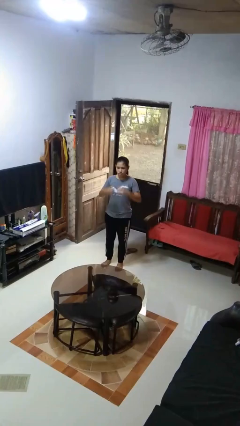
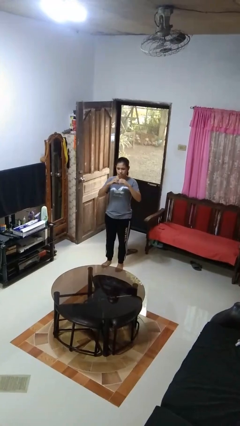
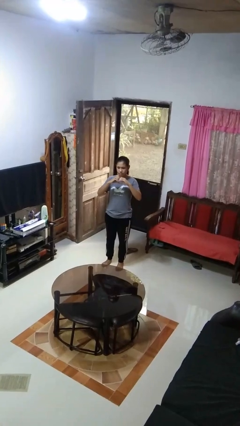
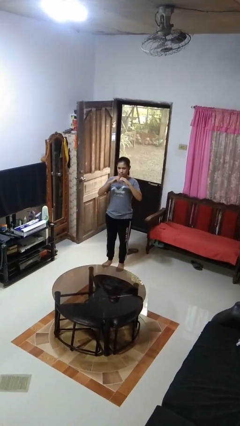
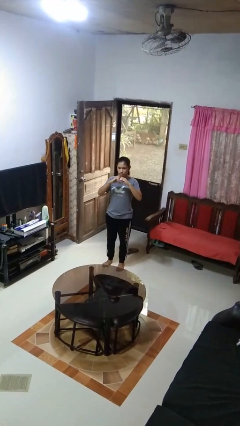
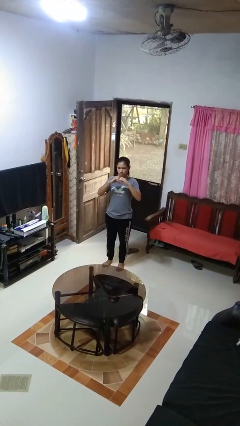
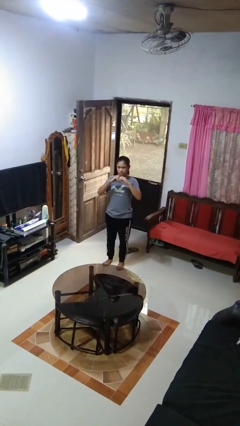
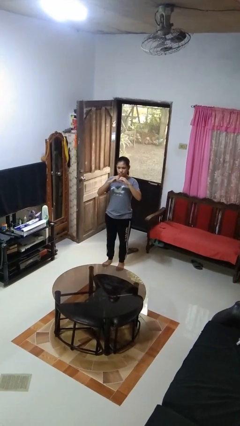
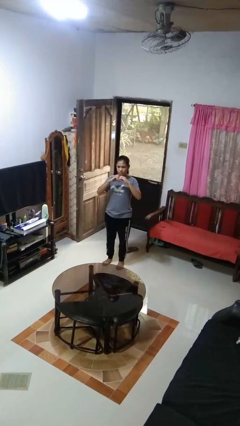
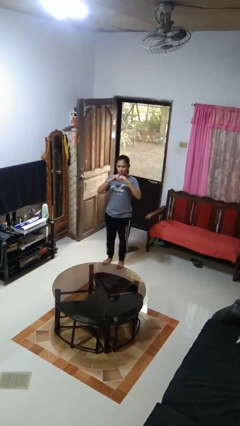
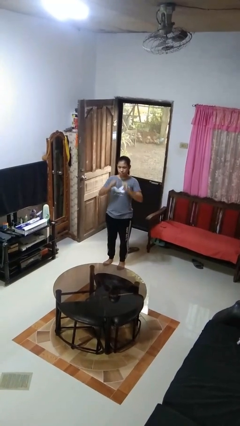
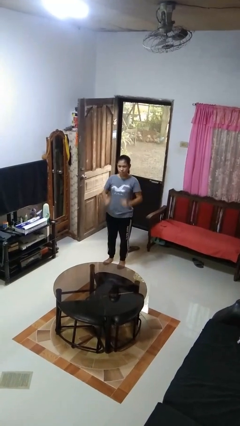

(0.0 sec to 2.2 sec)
person gestures heart

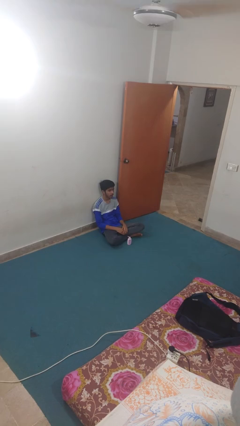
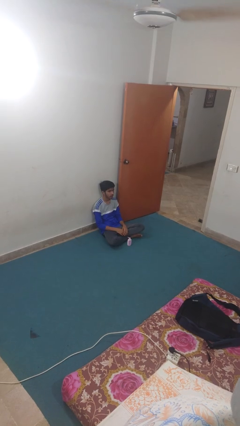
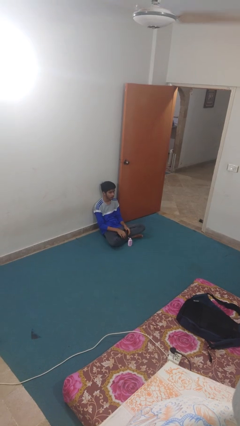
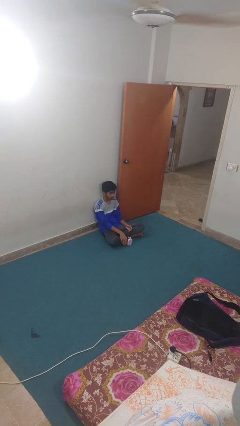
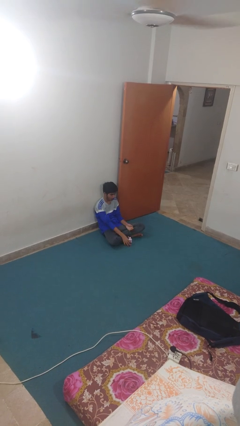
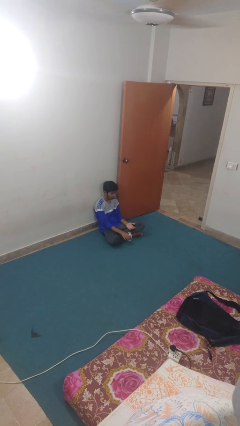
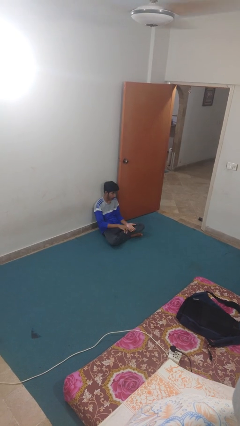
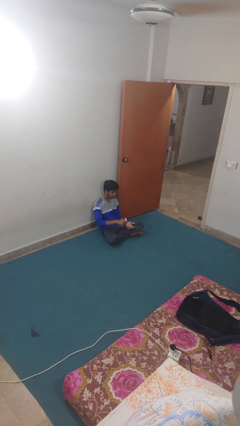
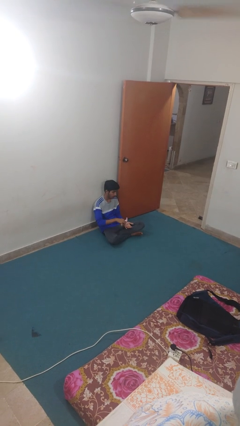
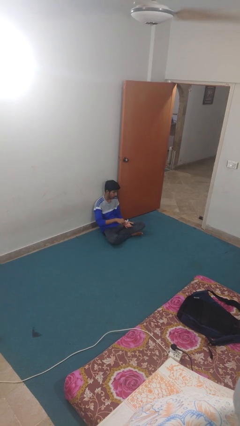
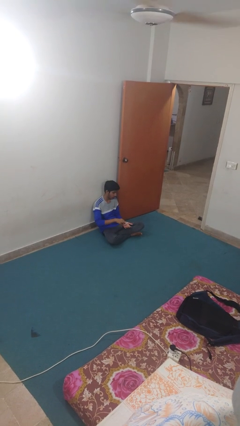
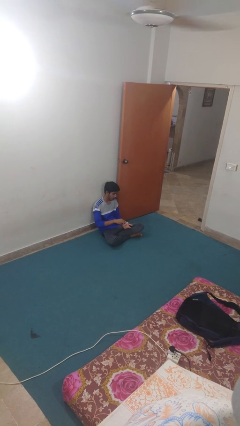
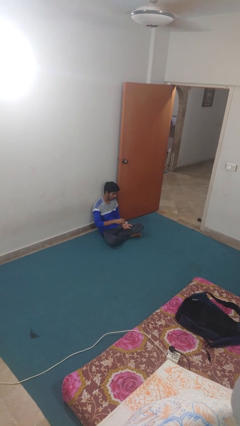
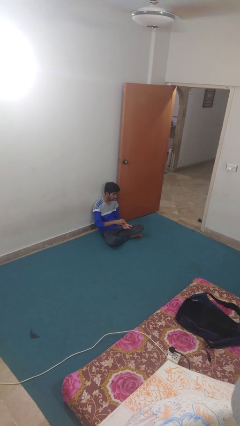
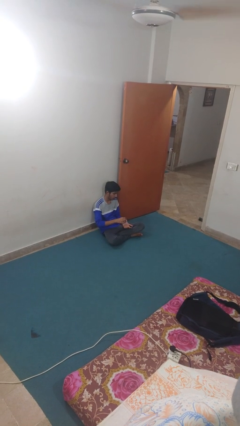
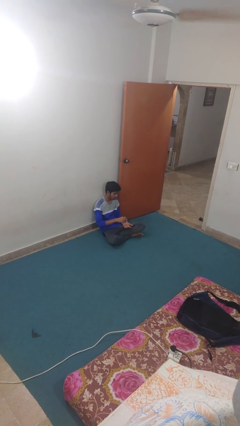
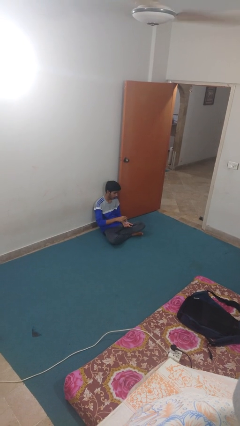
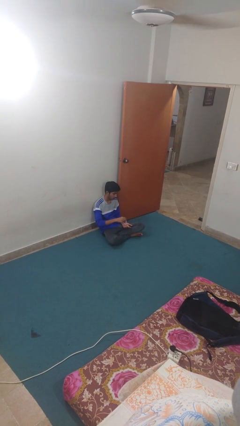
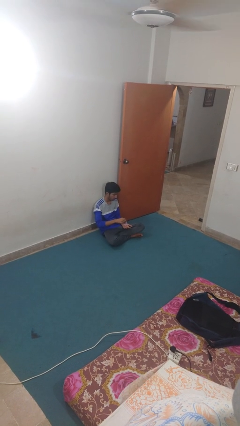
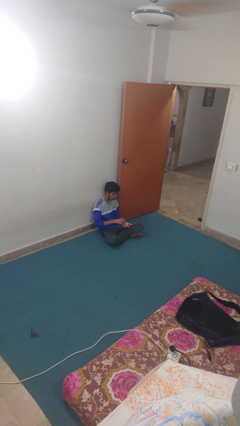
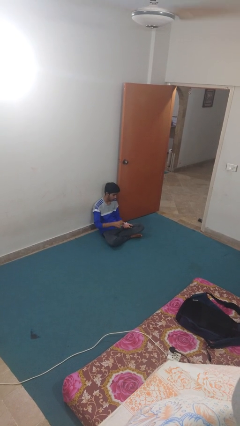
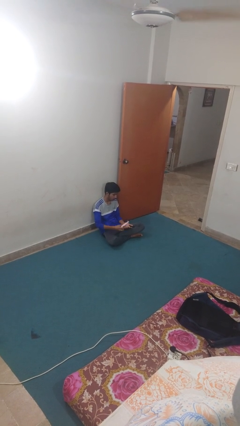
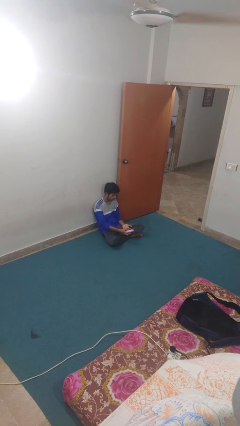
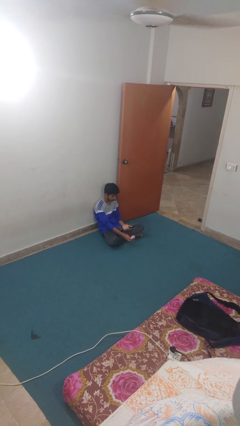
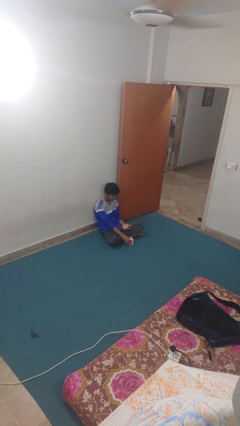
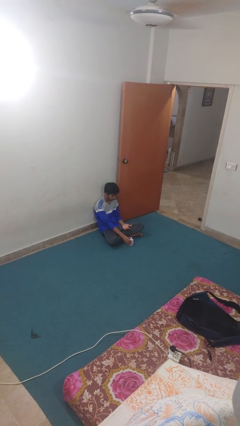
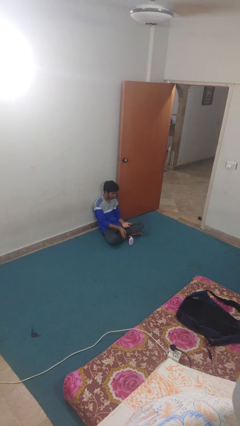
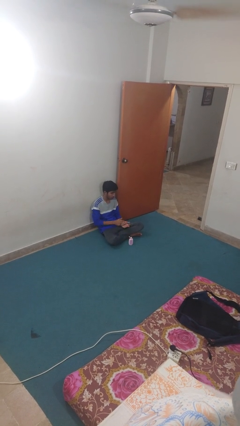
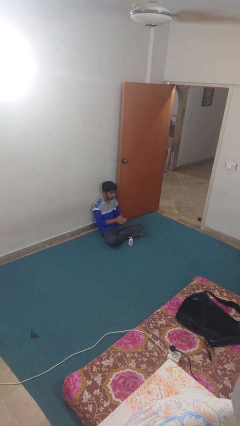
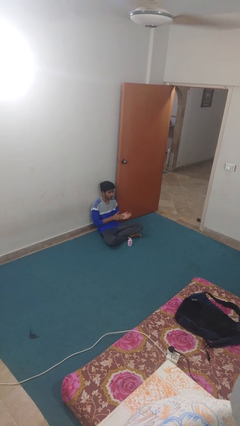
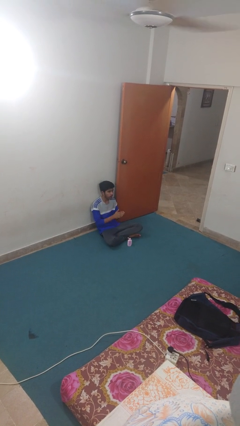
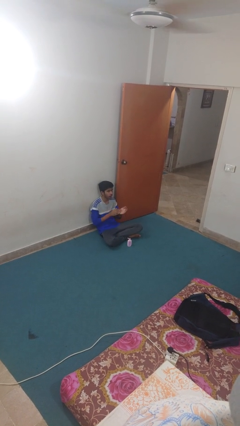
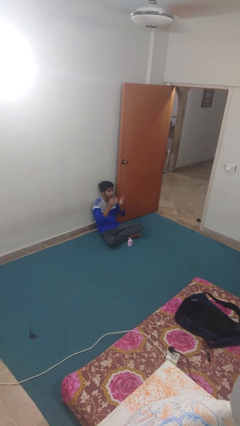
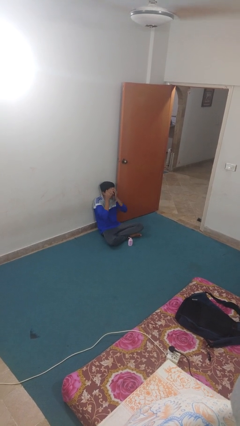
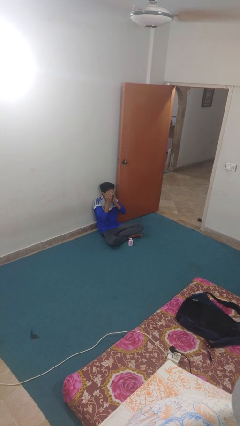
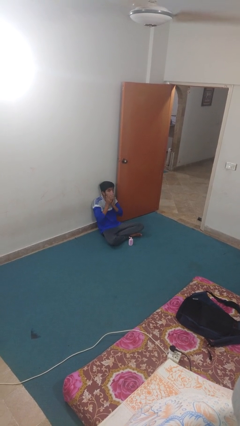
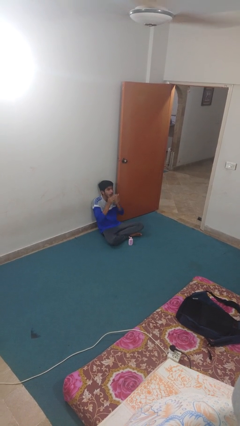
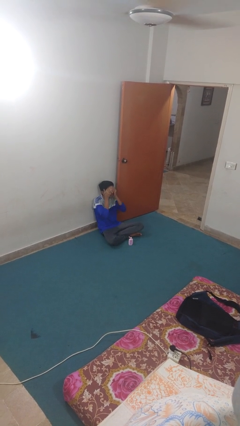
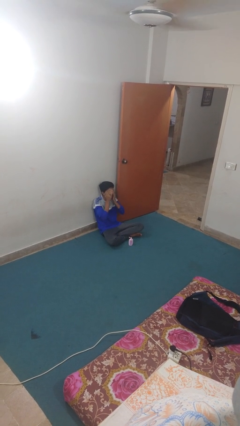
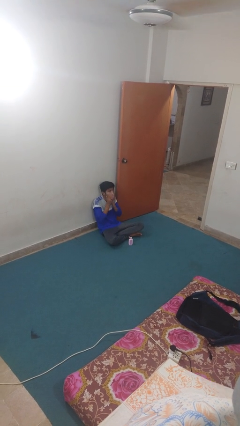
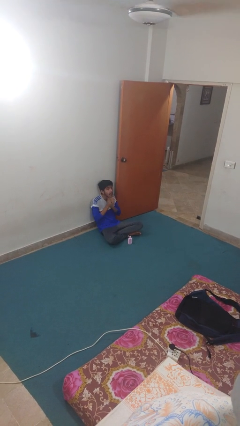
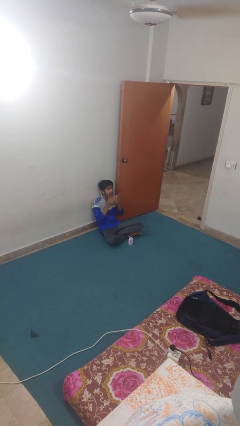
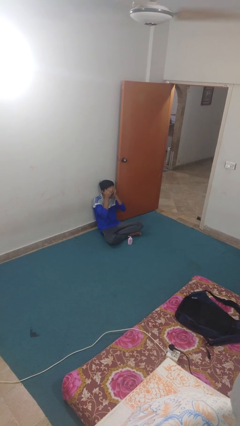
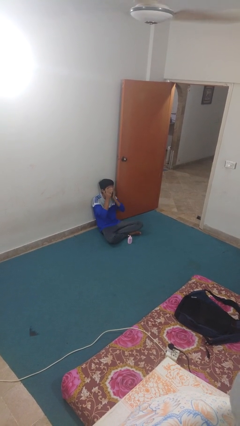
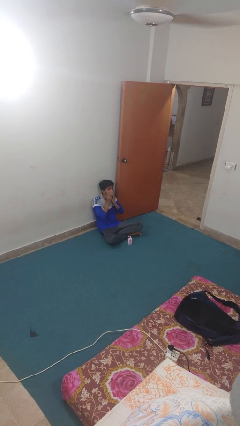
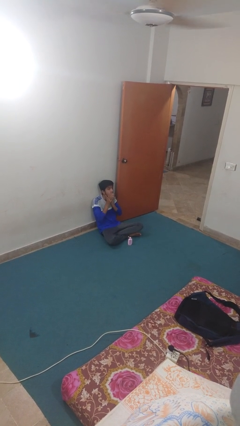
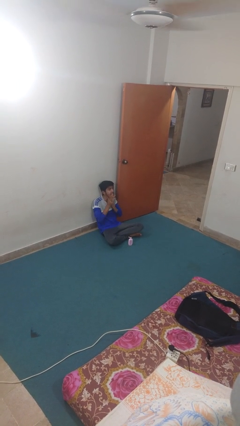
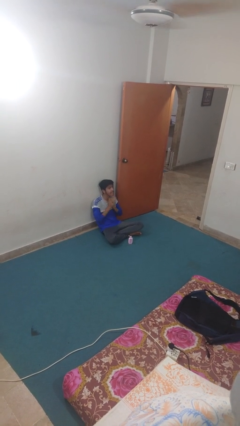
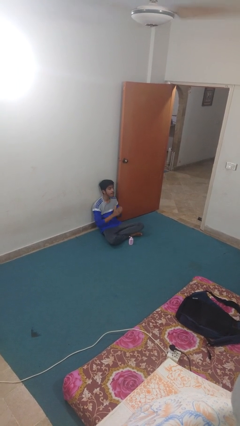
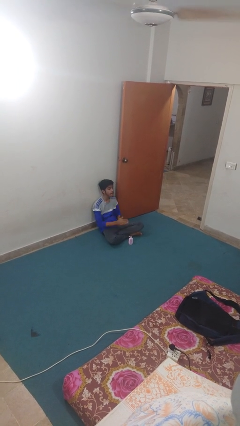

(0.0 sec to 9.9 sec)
person applies facial moisturizer

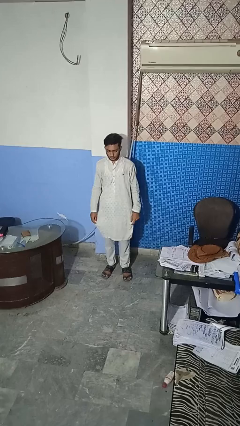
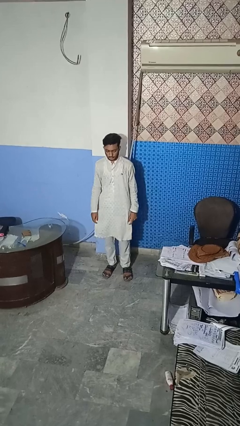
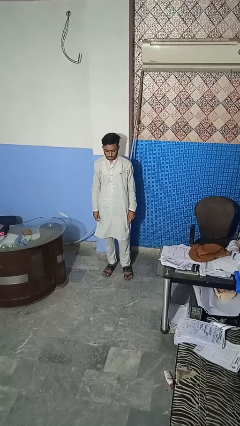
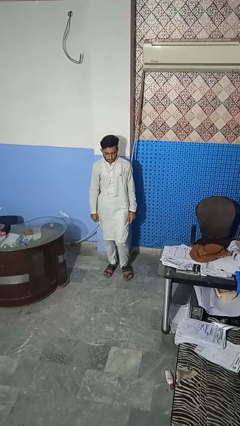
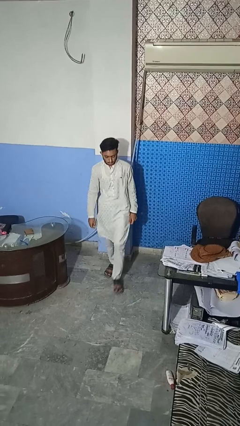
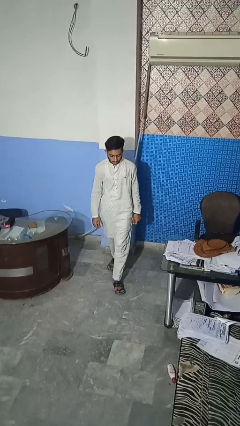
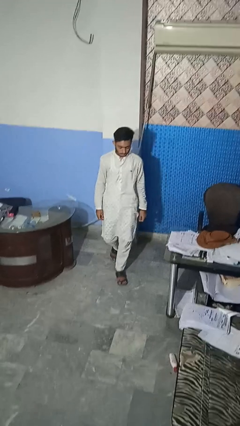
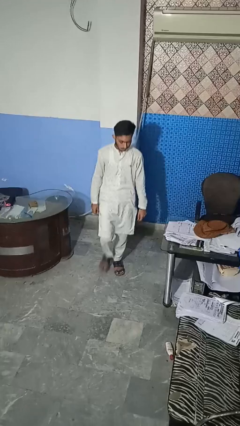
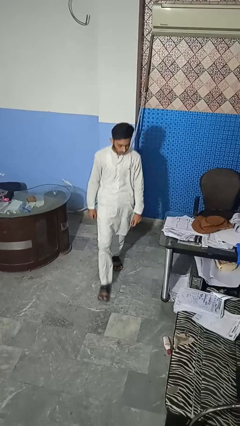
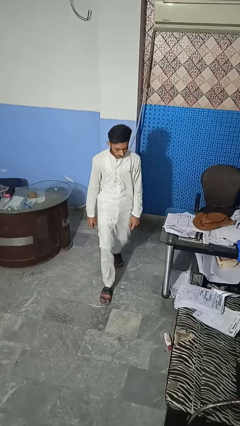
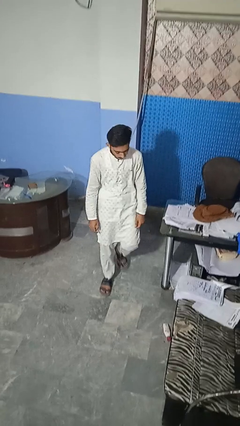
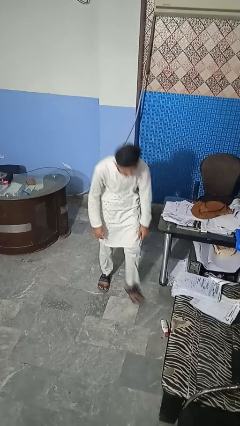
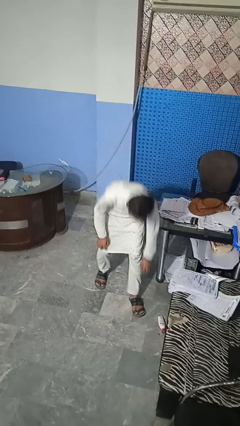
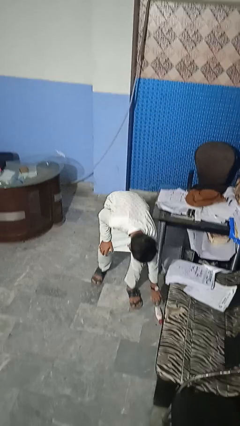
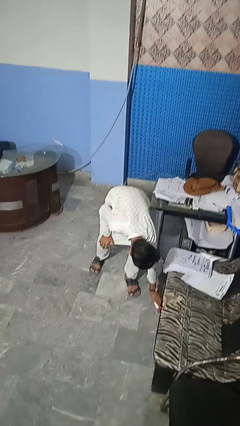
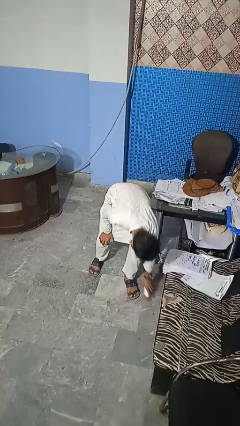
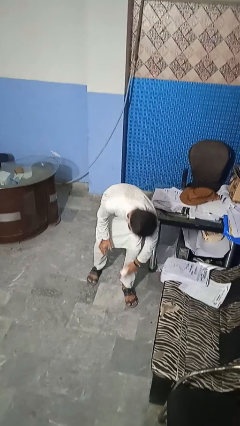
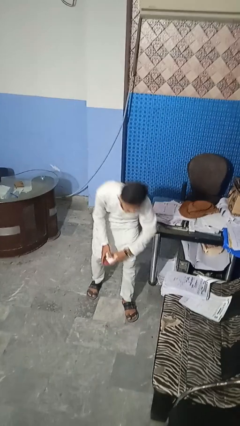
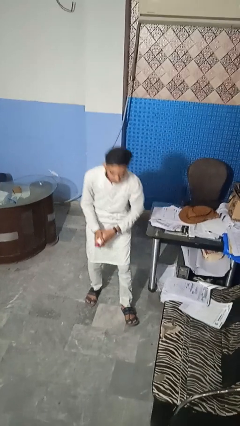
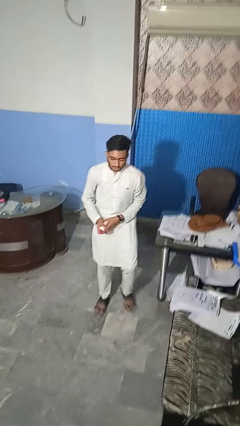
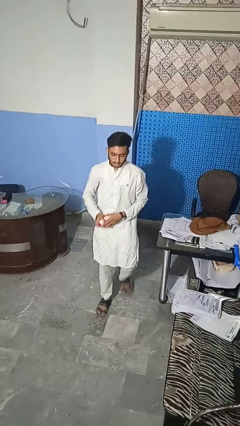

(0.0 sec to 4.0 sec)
person picks up object from floor

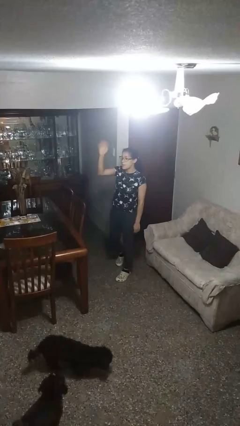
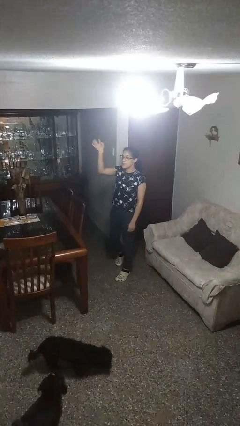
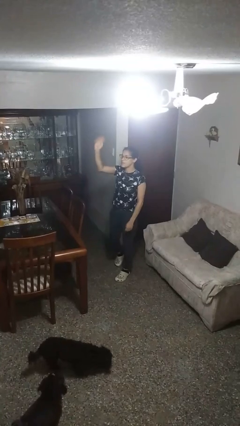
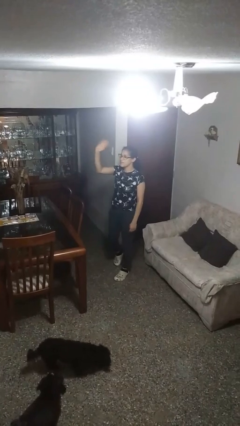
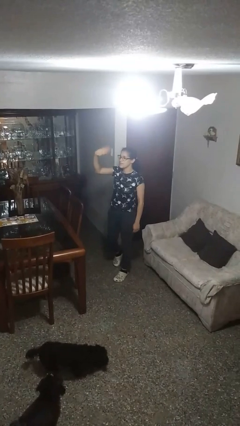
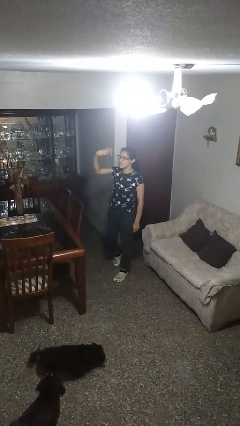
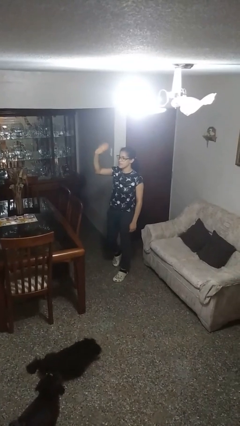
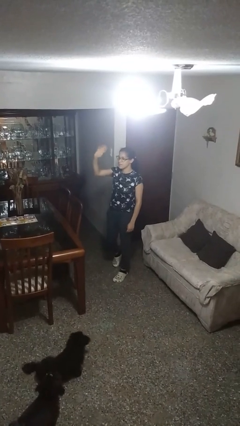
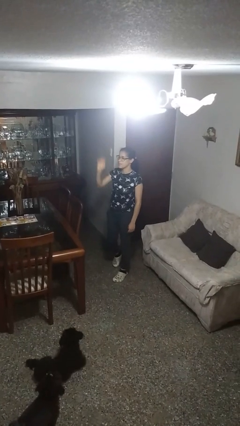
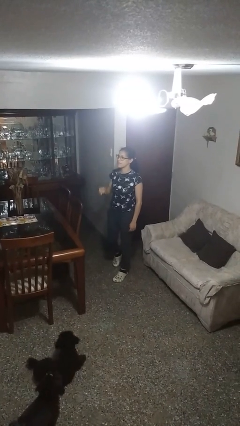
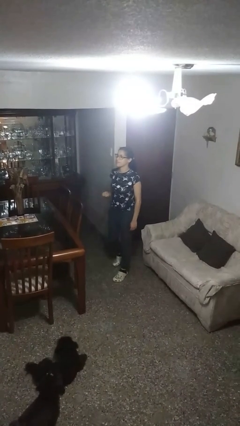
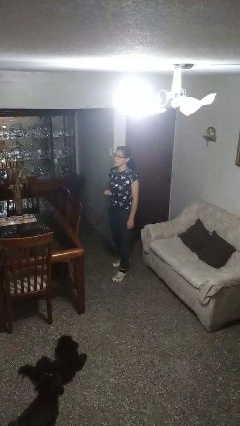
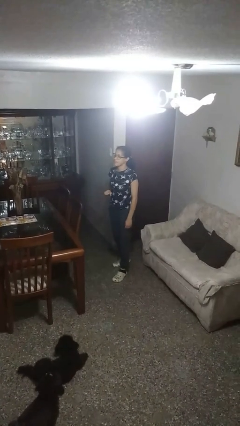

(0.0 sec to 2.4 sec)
person waves at person
